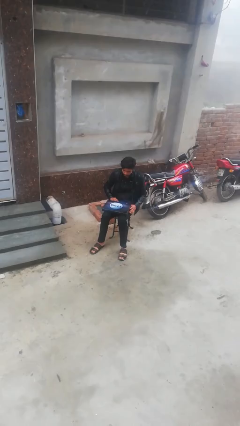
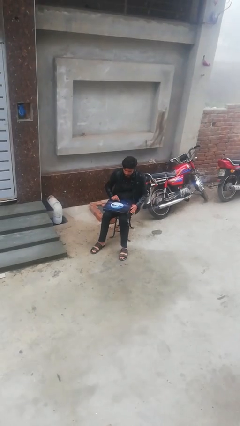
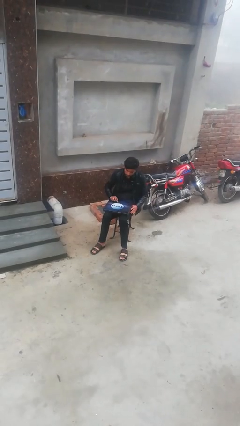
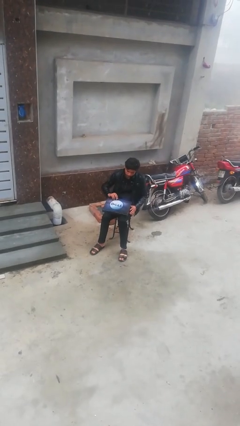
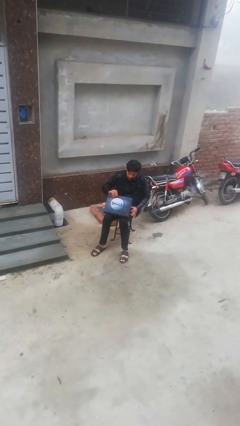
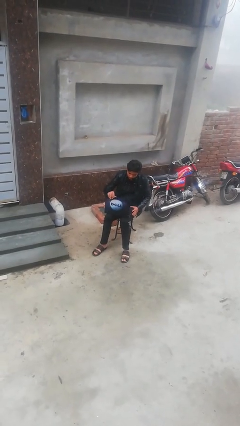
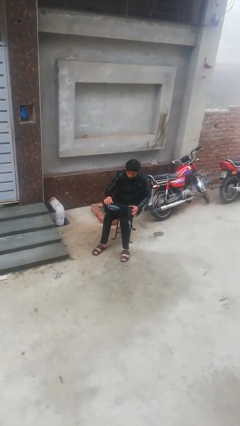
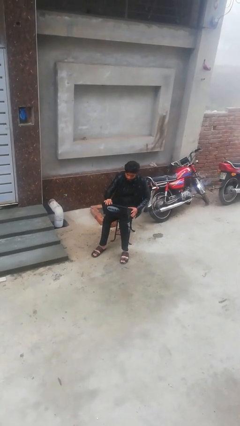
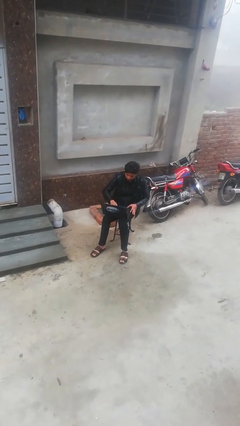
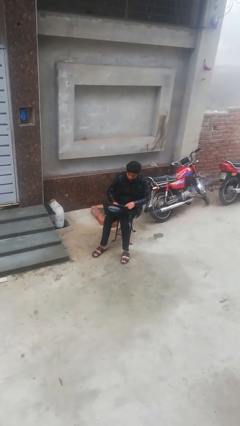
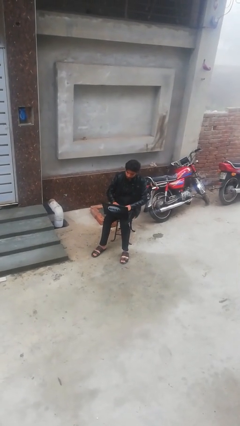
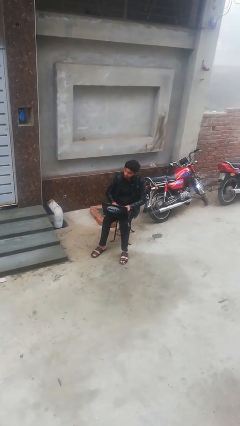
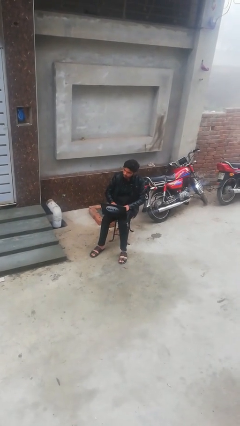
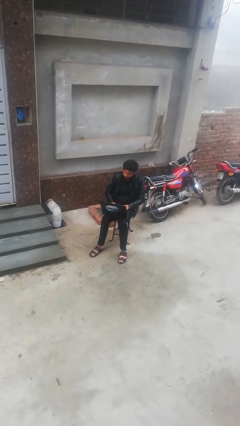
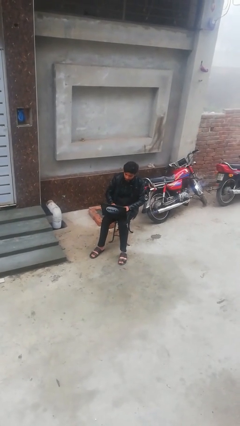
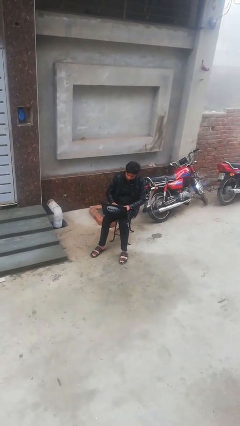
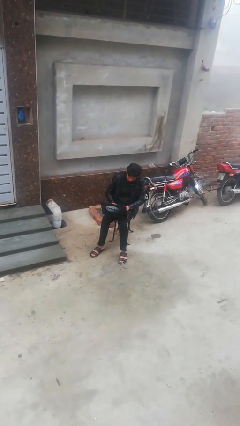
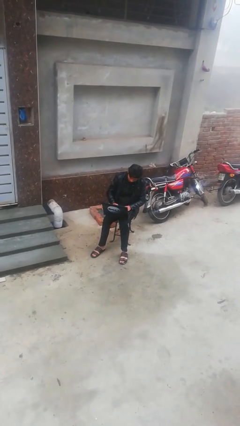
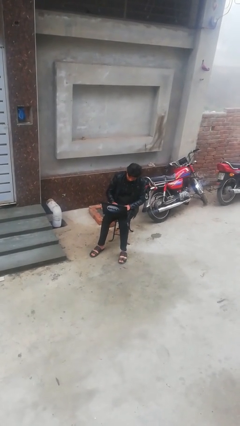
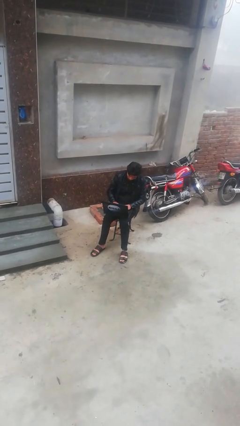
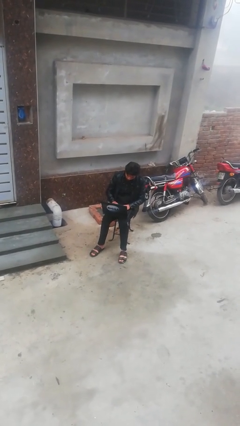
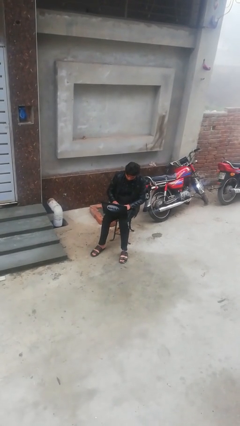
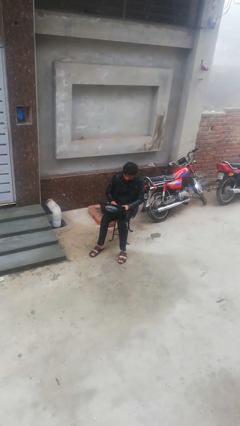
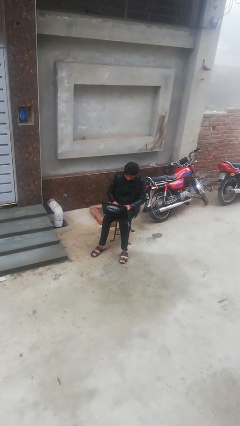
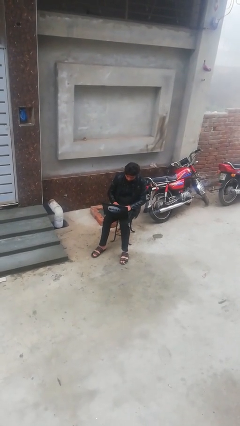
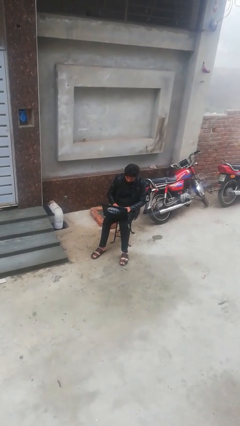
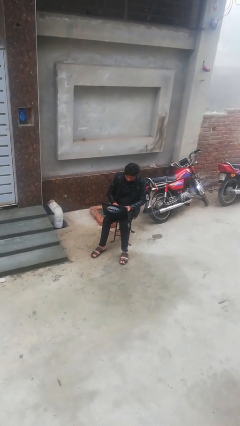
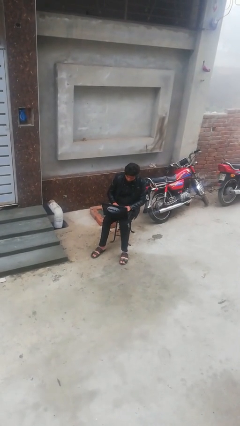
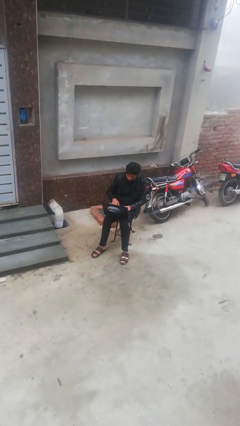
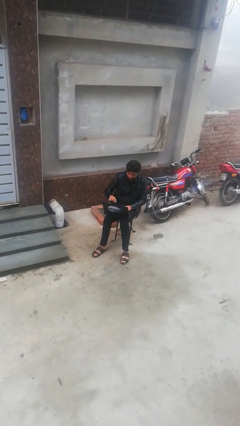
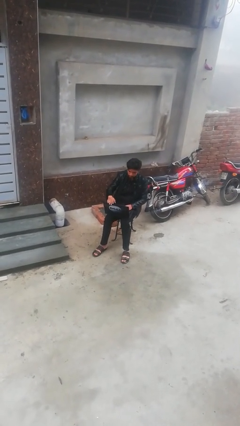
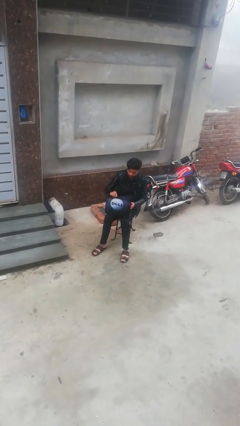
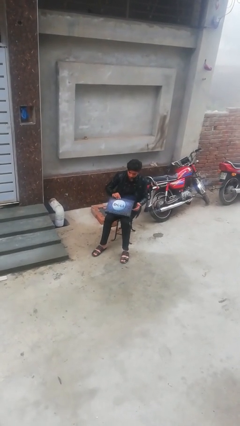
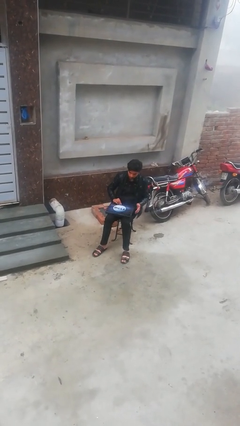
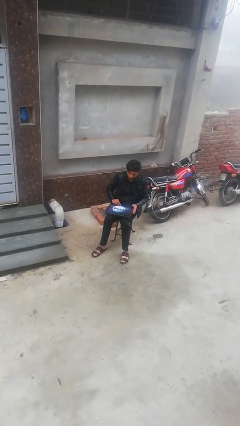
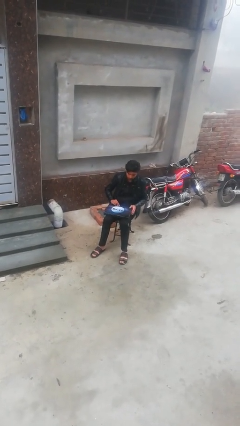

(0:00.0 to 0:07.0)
person interacts with laptop

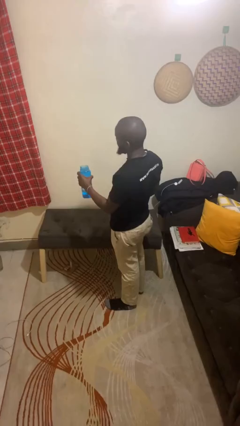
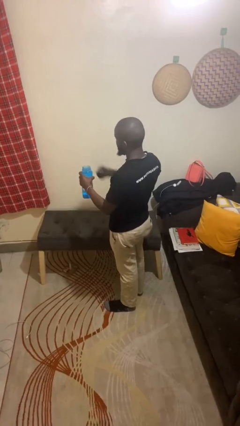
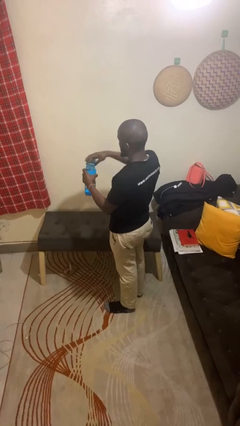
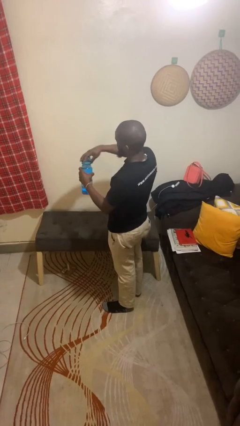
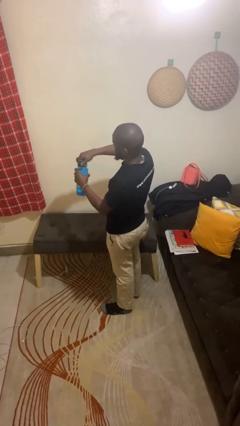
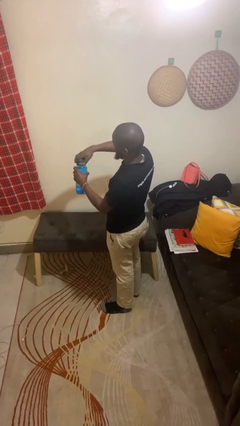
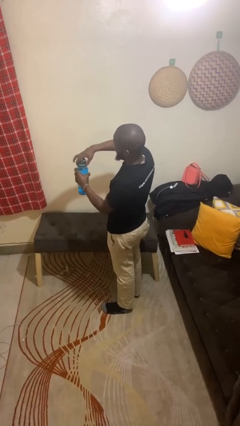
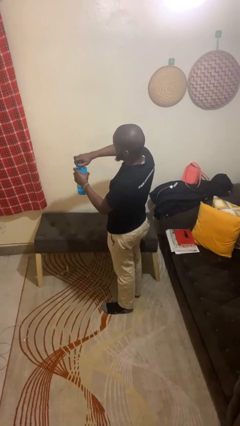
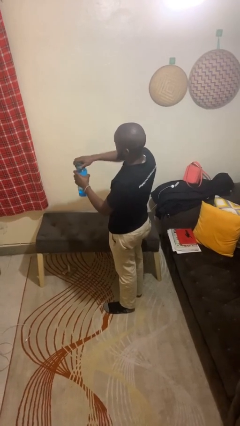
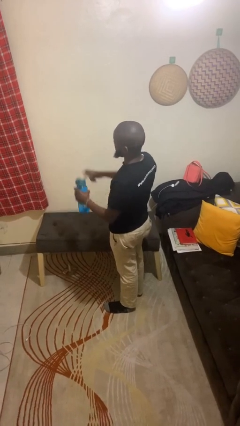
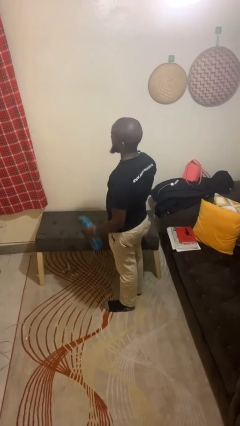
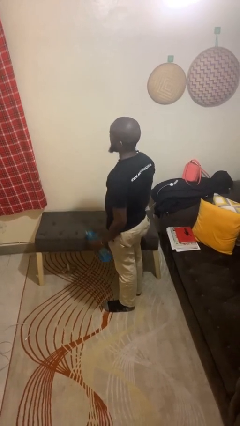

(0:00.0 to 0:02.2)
person closes jar

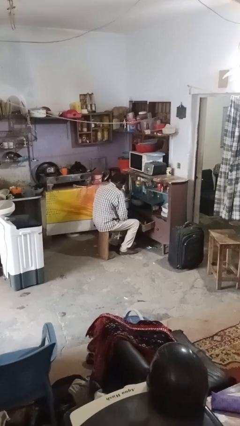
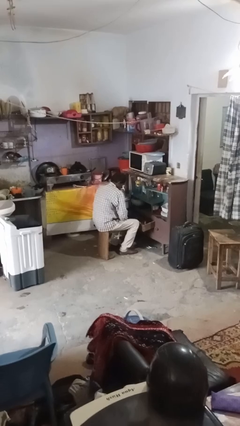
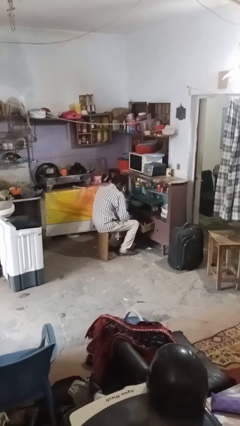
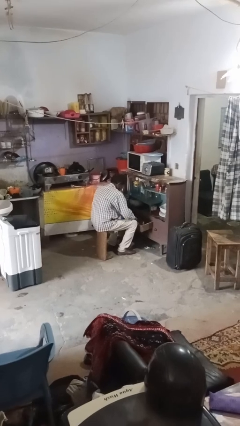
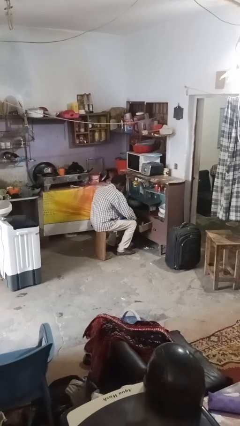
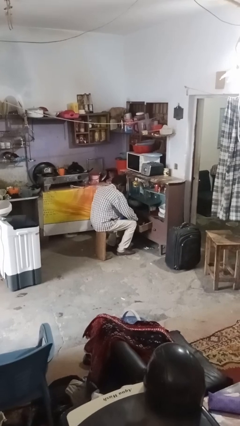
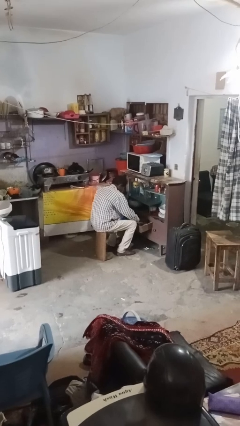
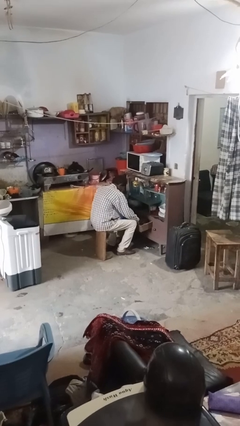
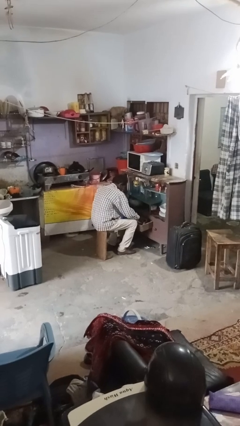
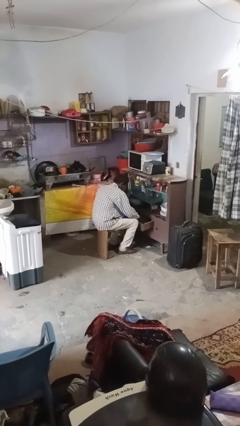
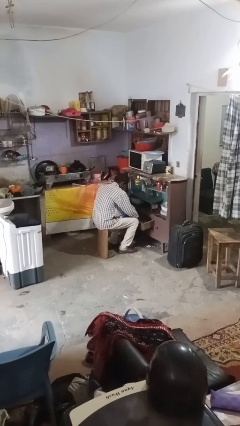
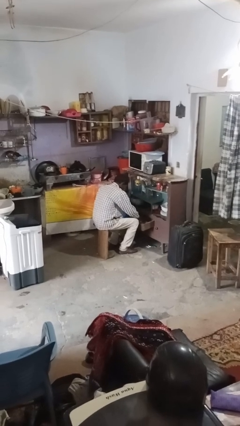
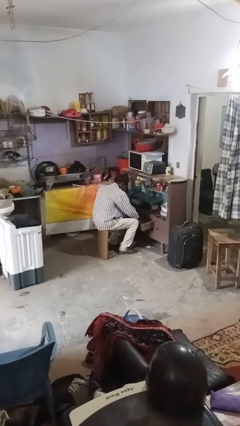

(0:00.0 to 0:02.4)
person searches in kitchen drawer

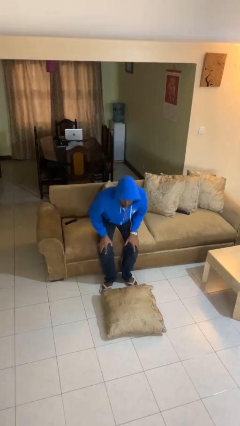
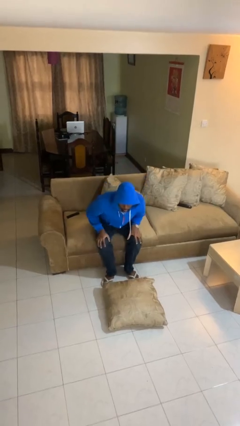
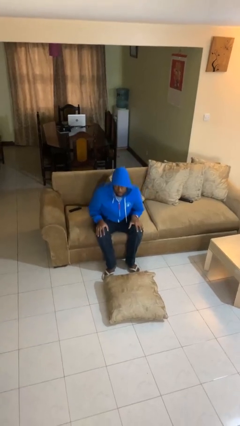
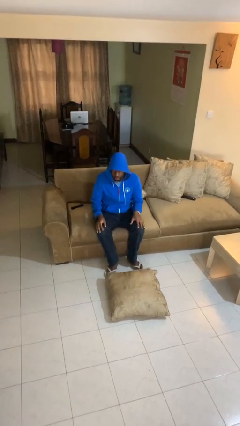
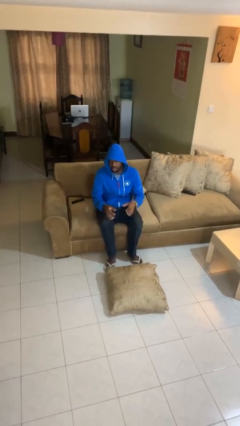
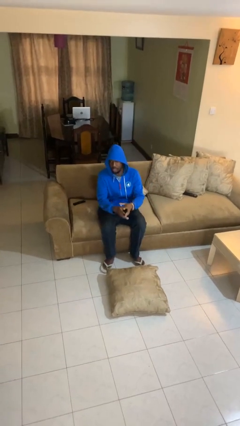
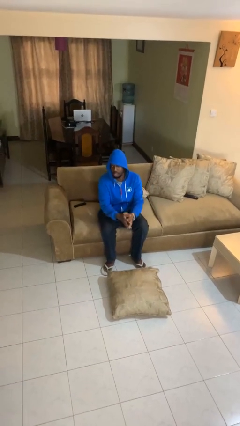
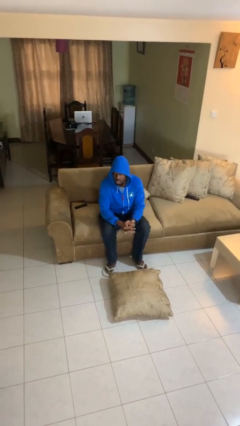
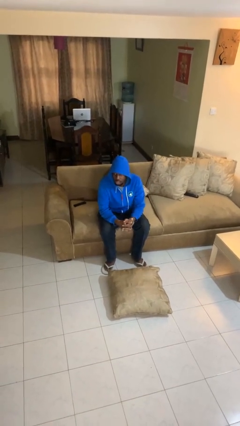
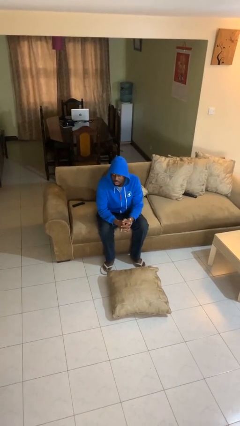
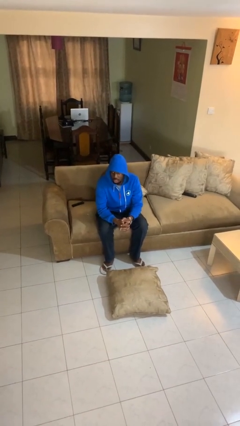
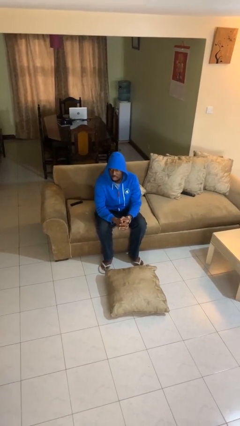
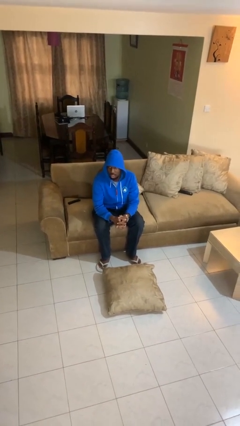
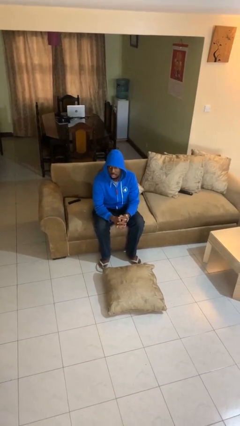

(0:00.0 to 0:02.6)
person sits down

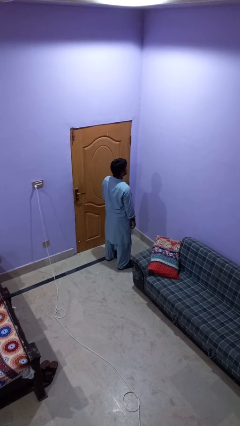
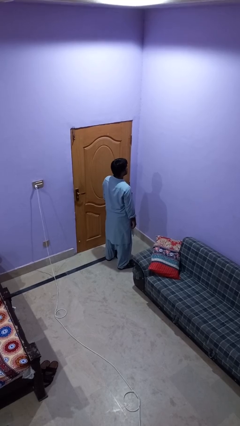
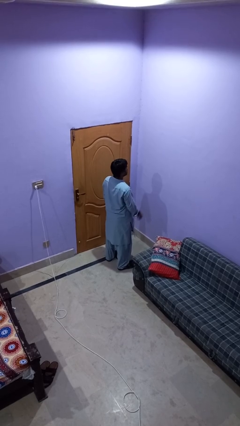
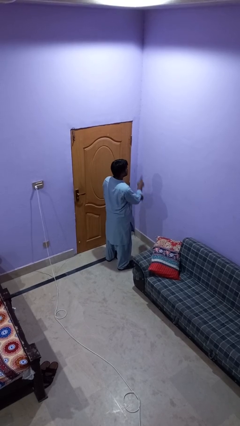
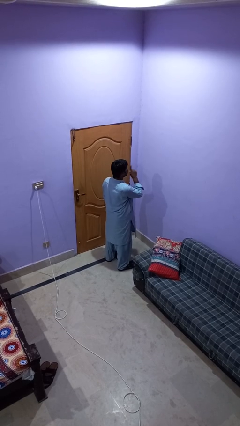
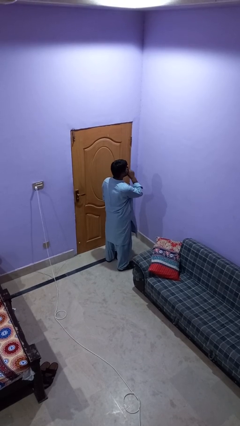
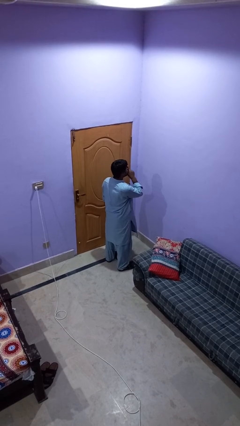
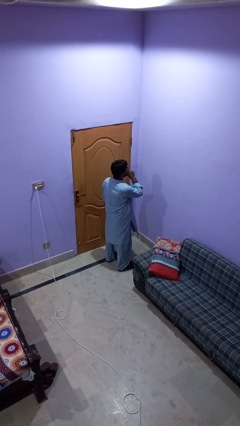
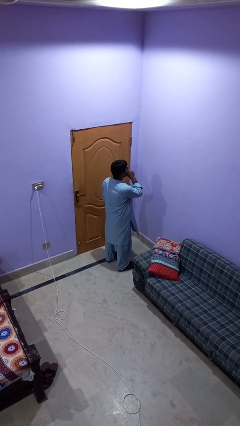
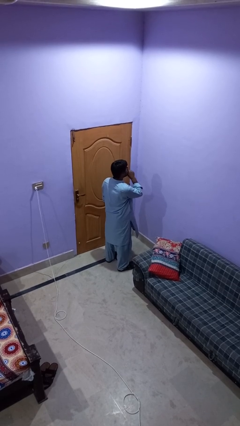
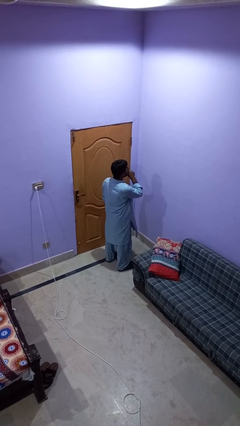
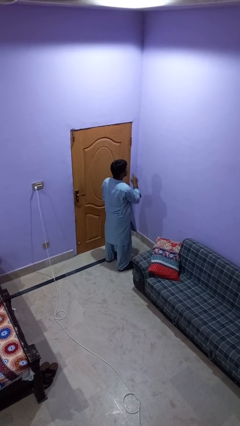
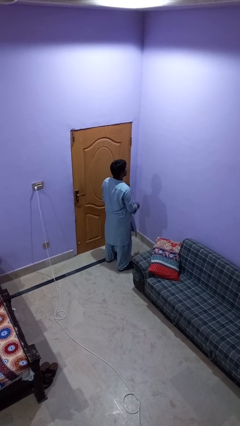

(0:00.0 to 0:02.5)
person gestures be quiet

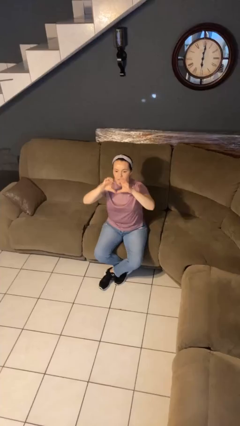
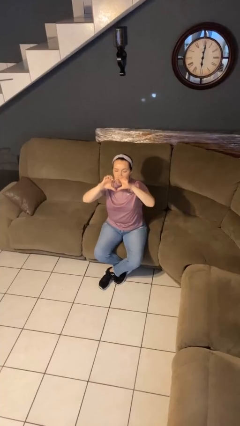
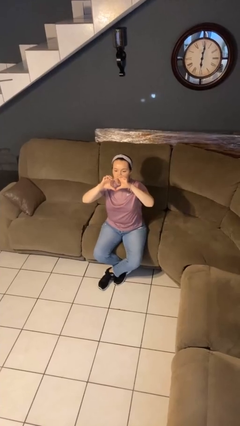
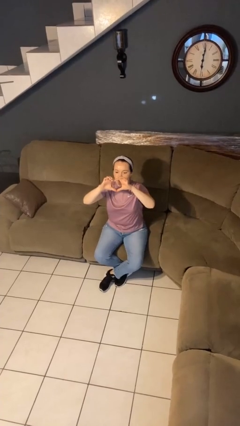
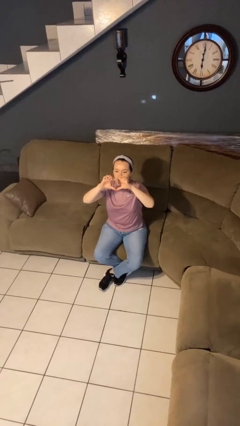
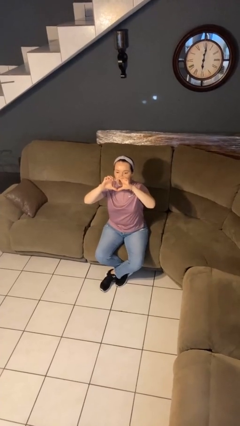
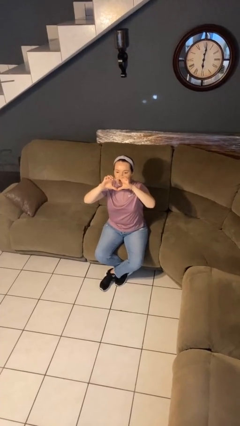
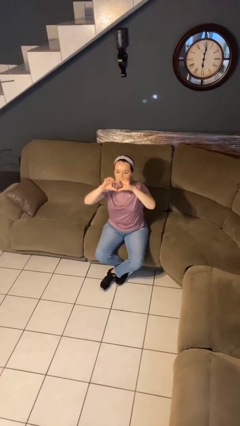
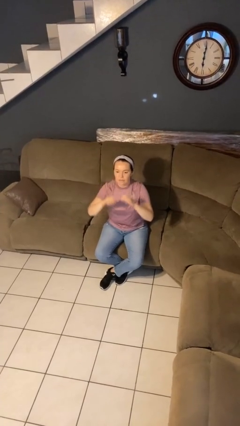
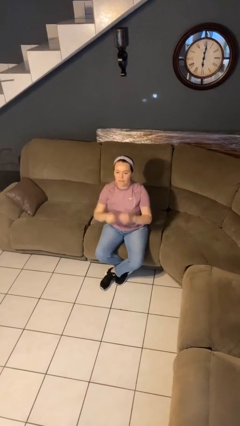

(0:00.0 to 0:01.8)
person gestures heart
